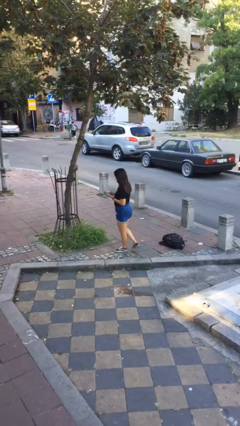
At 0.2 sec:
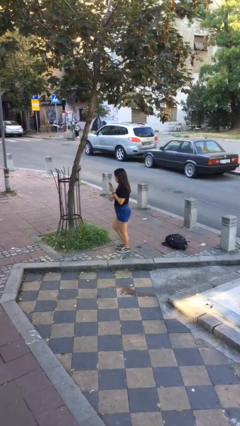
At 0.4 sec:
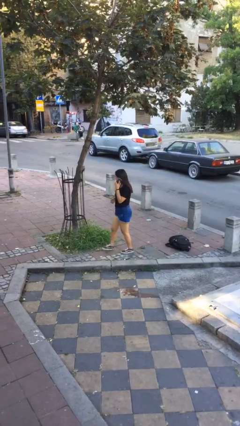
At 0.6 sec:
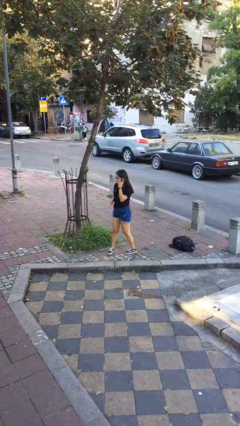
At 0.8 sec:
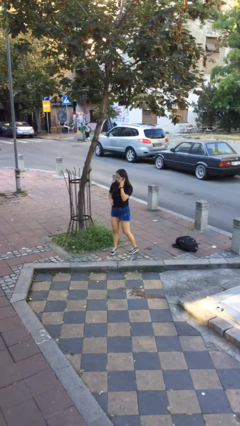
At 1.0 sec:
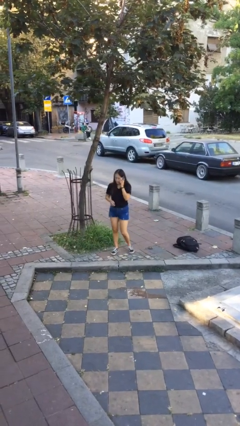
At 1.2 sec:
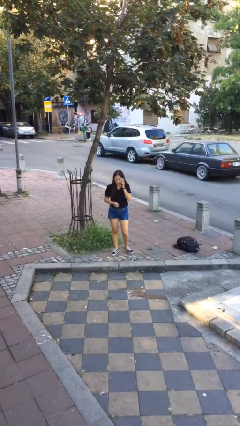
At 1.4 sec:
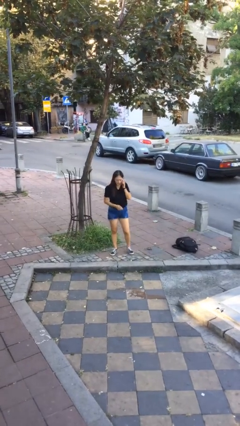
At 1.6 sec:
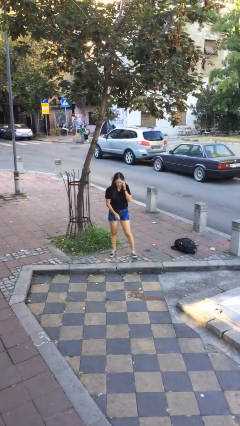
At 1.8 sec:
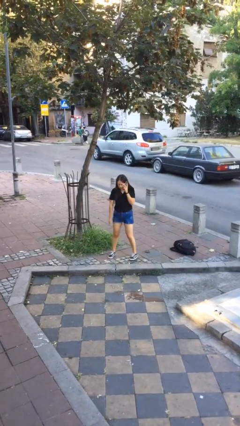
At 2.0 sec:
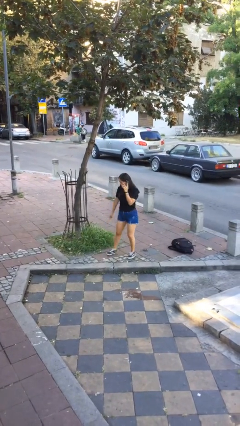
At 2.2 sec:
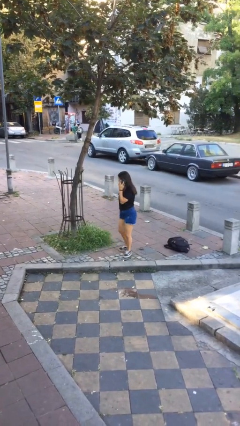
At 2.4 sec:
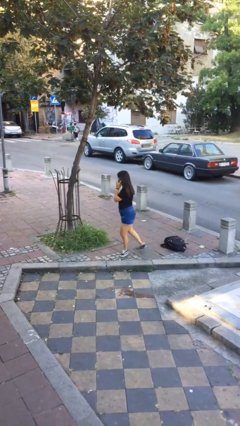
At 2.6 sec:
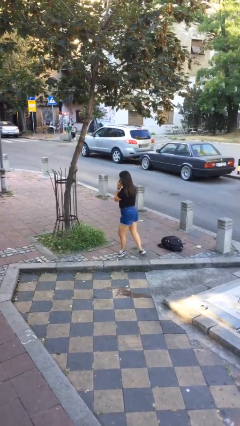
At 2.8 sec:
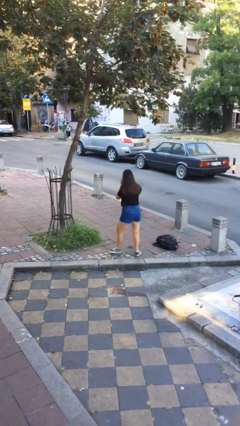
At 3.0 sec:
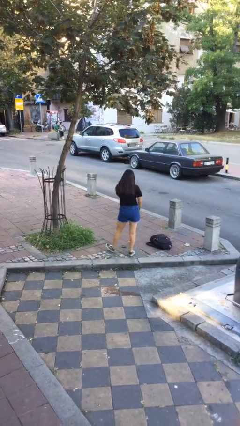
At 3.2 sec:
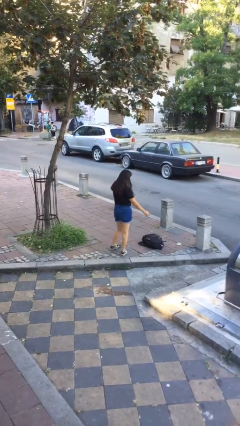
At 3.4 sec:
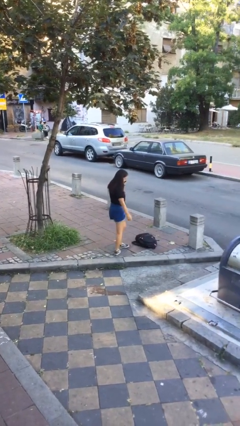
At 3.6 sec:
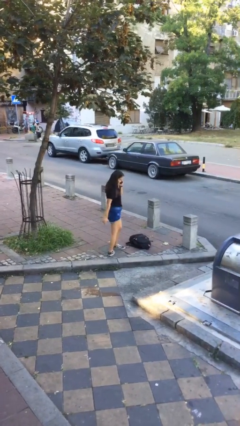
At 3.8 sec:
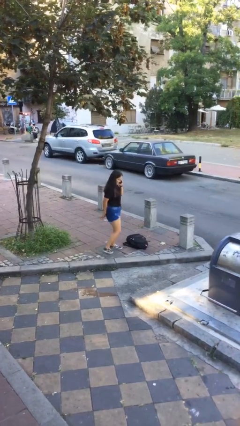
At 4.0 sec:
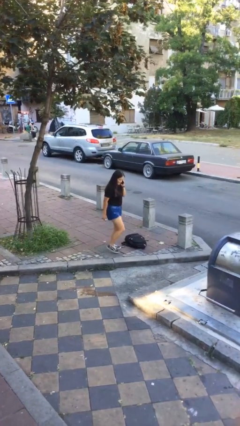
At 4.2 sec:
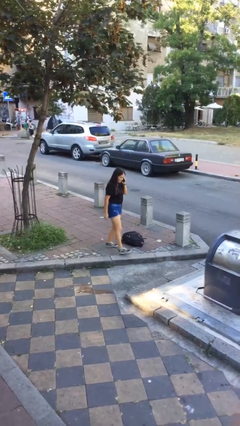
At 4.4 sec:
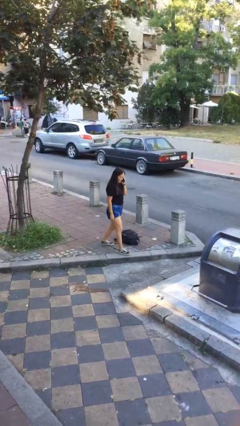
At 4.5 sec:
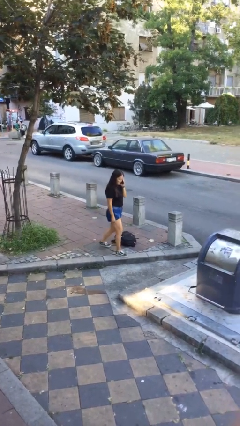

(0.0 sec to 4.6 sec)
person talks on phone

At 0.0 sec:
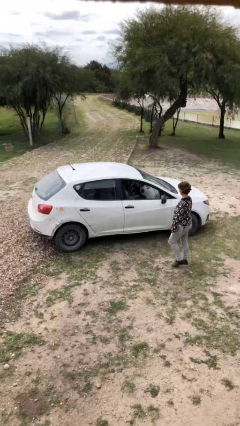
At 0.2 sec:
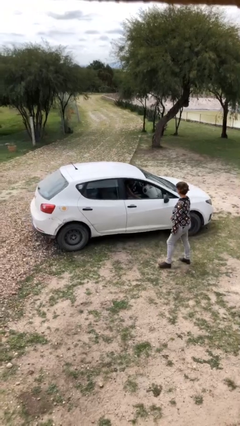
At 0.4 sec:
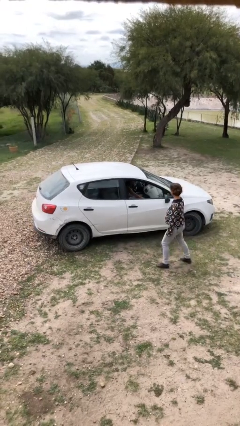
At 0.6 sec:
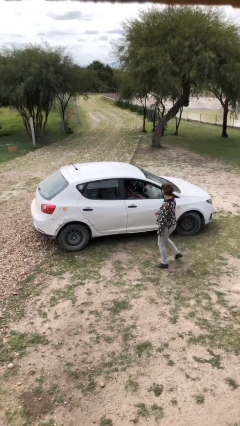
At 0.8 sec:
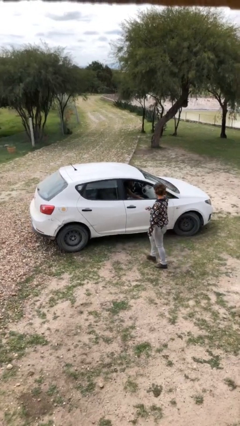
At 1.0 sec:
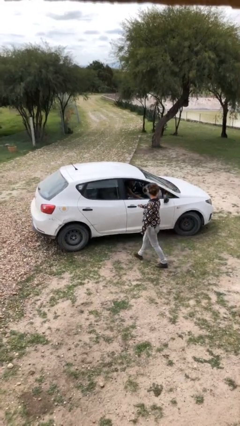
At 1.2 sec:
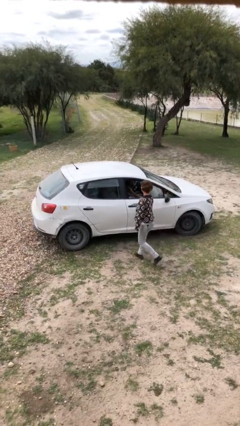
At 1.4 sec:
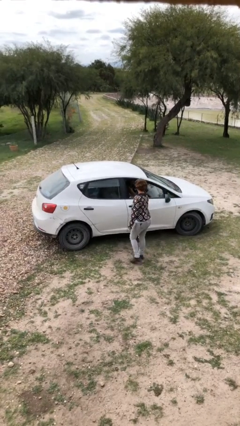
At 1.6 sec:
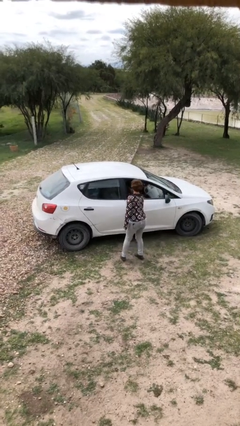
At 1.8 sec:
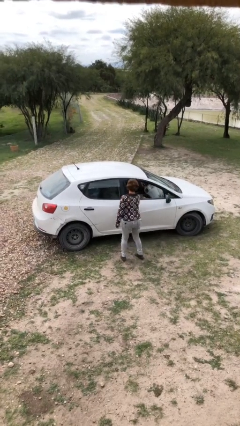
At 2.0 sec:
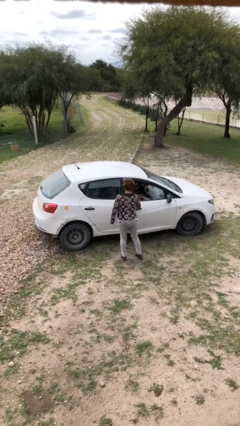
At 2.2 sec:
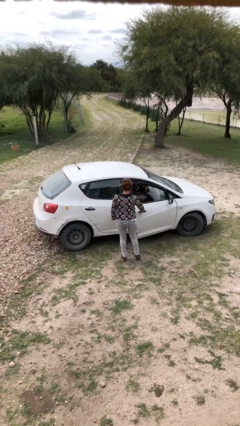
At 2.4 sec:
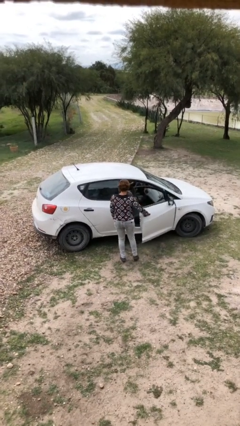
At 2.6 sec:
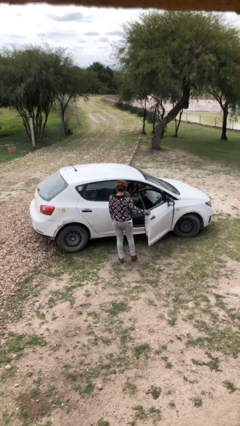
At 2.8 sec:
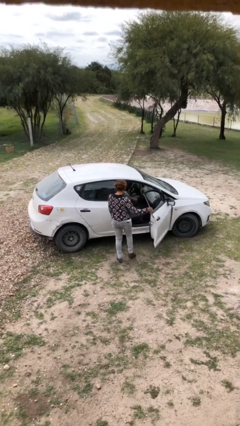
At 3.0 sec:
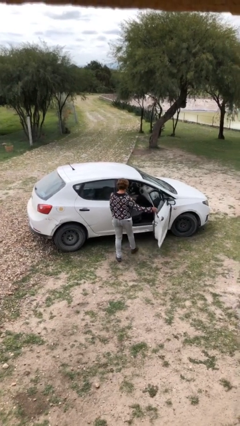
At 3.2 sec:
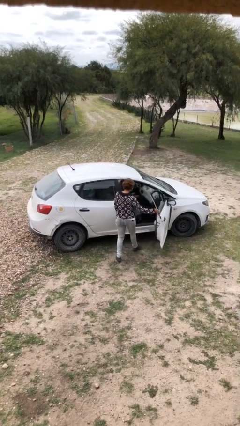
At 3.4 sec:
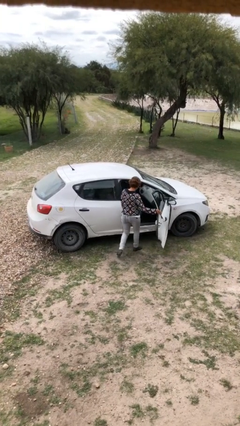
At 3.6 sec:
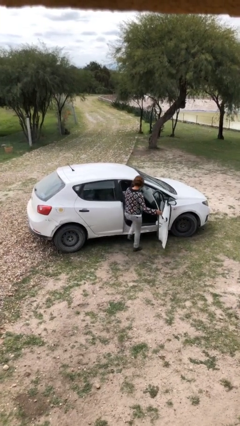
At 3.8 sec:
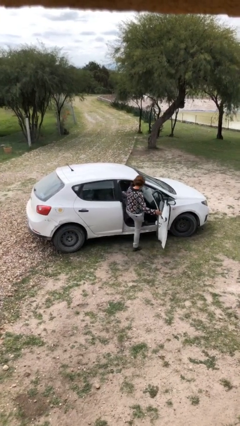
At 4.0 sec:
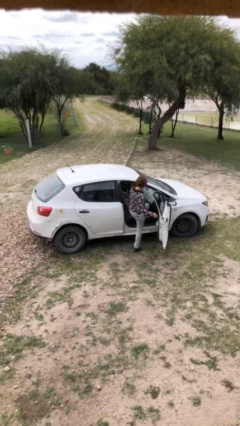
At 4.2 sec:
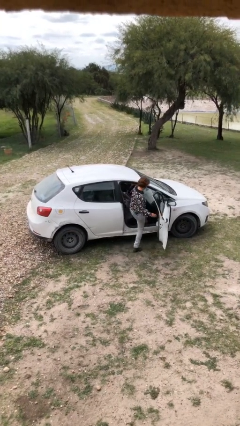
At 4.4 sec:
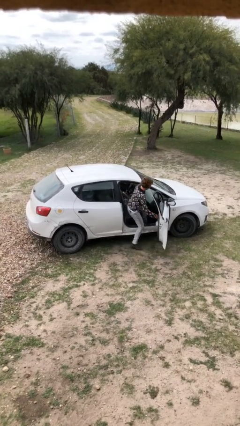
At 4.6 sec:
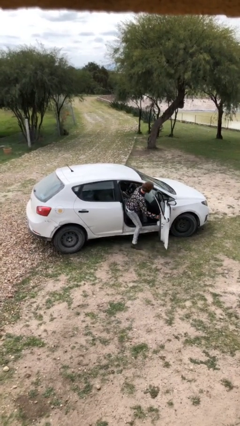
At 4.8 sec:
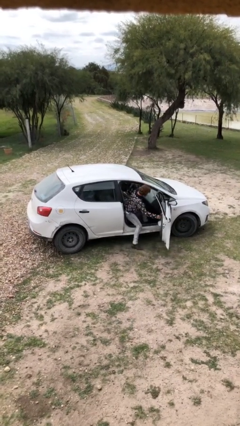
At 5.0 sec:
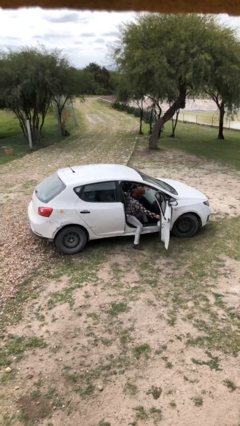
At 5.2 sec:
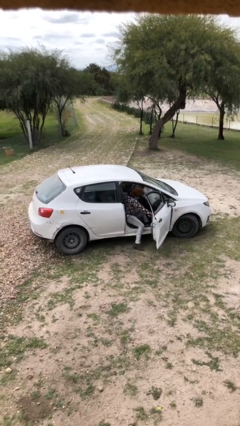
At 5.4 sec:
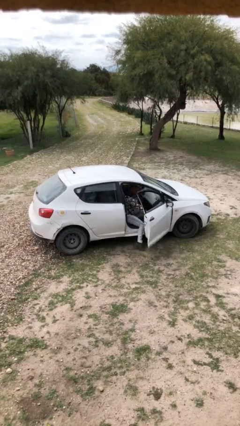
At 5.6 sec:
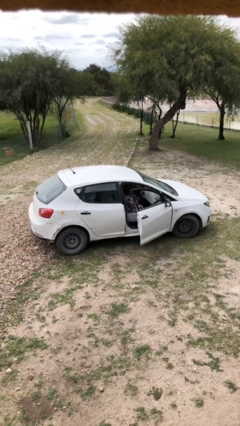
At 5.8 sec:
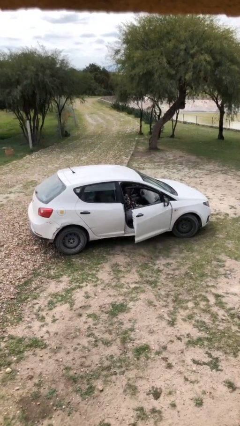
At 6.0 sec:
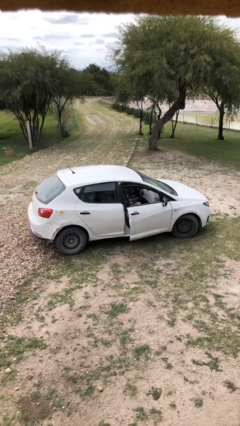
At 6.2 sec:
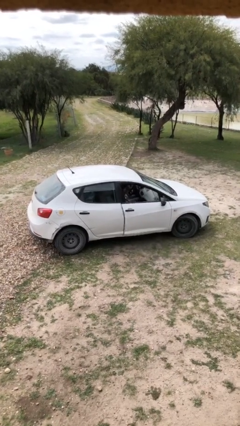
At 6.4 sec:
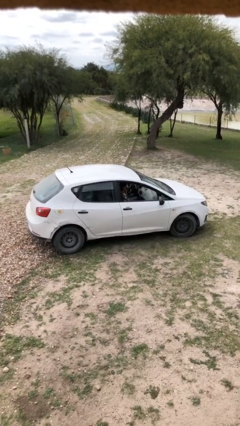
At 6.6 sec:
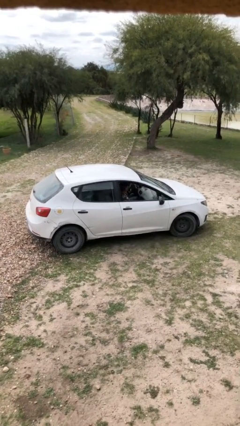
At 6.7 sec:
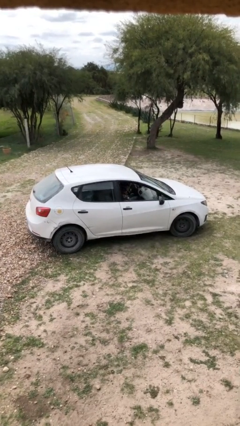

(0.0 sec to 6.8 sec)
car picks up person

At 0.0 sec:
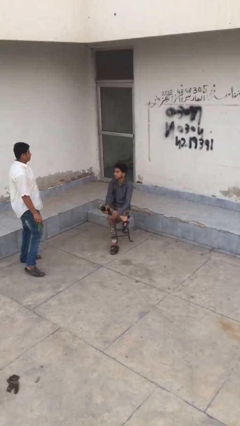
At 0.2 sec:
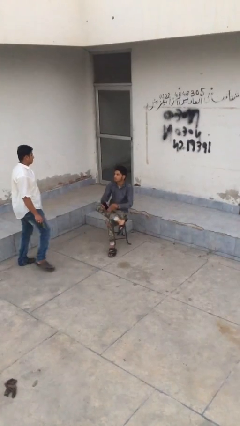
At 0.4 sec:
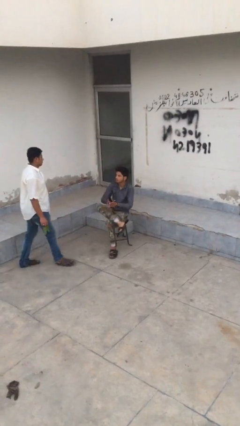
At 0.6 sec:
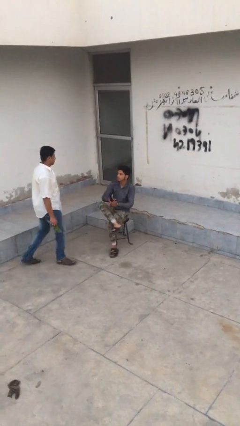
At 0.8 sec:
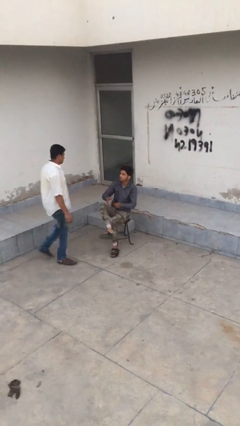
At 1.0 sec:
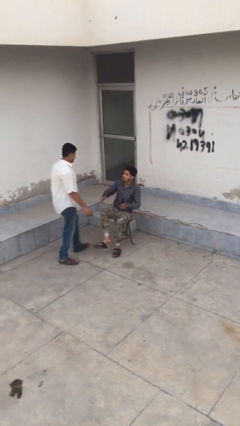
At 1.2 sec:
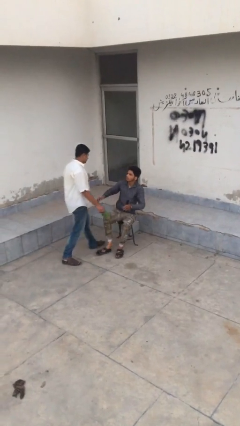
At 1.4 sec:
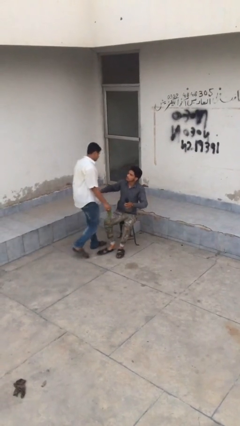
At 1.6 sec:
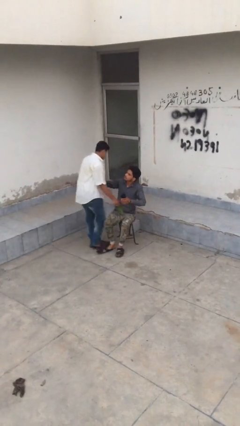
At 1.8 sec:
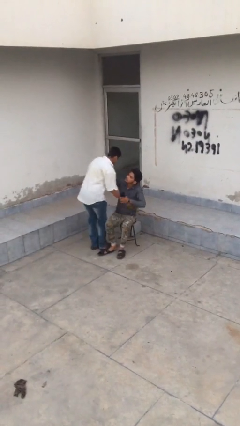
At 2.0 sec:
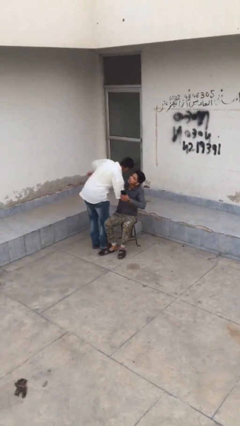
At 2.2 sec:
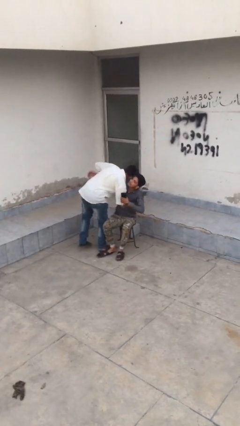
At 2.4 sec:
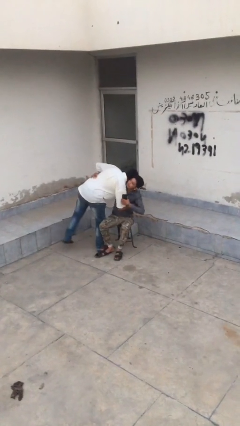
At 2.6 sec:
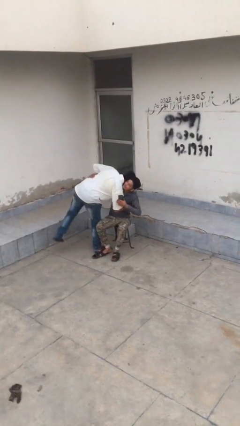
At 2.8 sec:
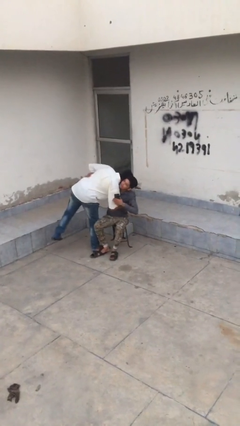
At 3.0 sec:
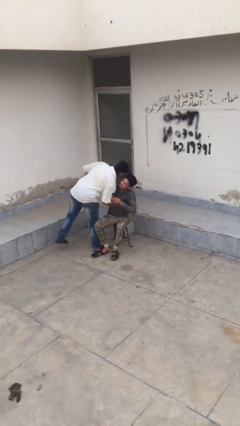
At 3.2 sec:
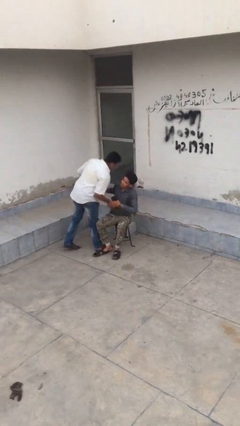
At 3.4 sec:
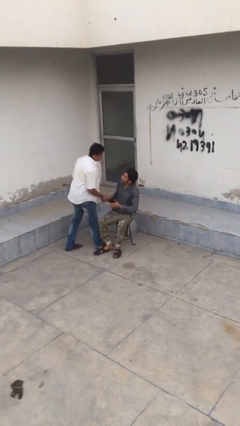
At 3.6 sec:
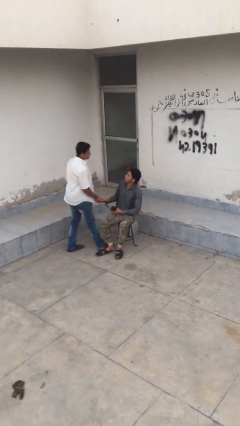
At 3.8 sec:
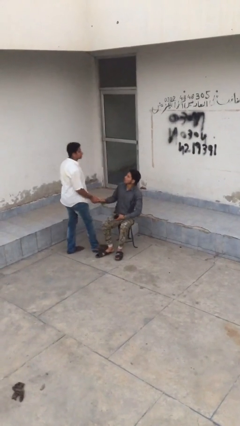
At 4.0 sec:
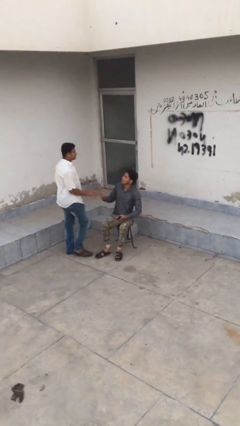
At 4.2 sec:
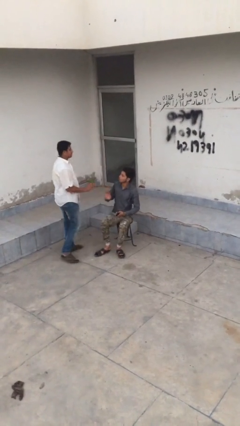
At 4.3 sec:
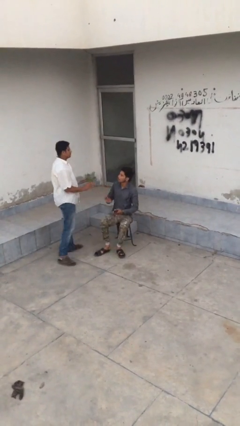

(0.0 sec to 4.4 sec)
person embraces person

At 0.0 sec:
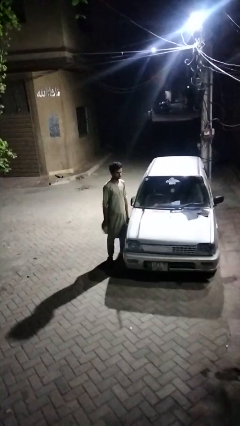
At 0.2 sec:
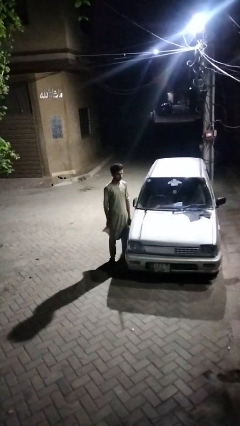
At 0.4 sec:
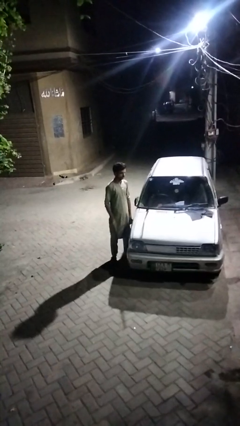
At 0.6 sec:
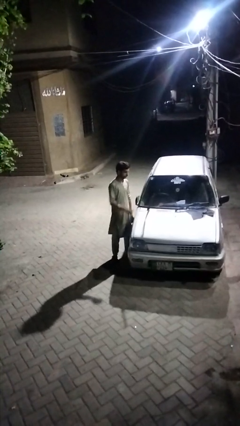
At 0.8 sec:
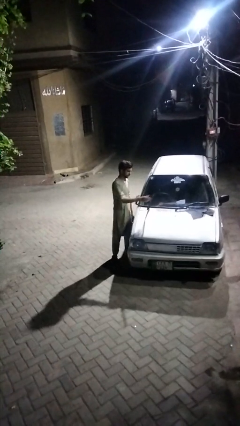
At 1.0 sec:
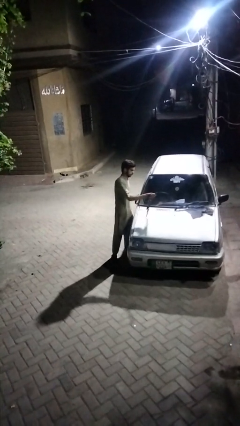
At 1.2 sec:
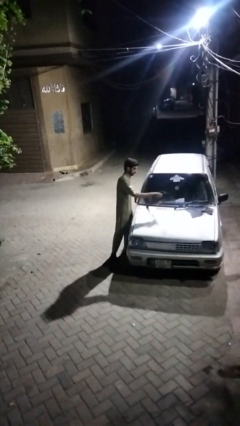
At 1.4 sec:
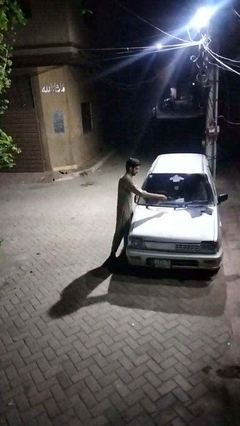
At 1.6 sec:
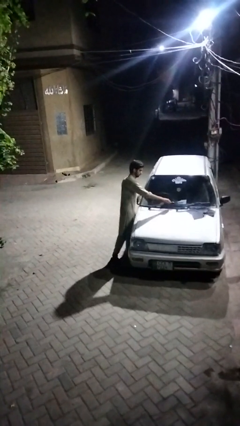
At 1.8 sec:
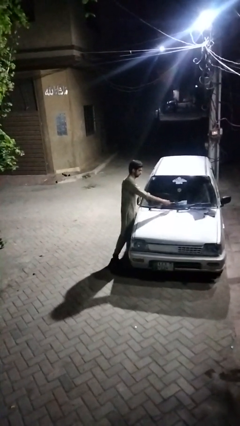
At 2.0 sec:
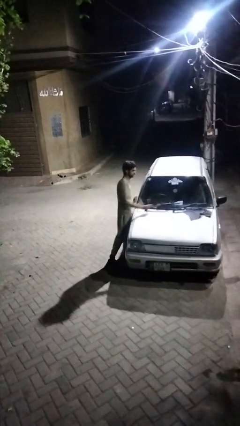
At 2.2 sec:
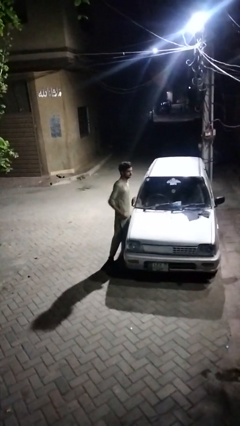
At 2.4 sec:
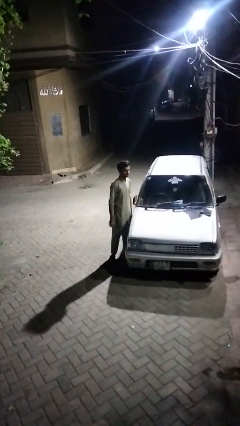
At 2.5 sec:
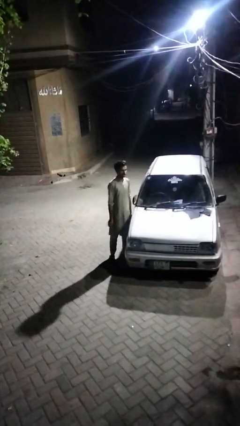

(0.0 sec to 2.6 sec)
person flips down car wipers
